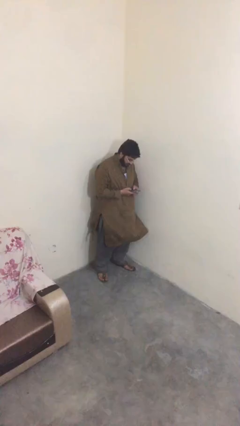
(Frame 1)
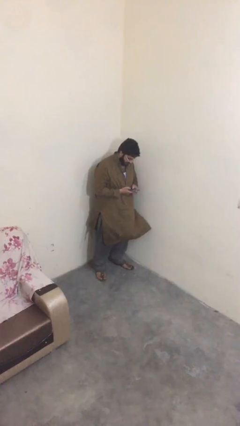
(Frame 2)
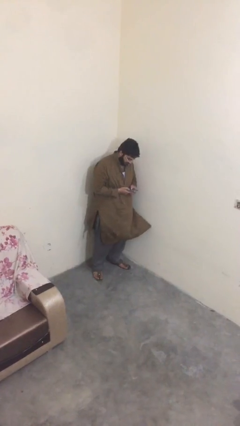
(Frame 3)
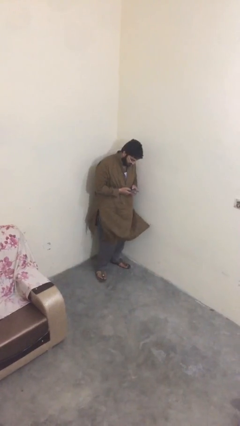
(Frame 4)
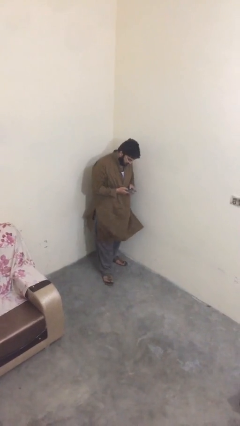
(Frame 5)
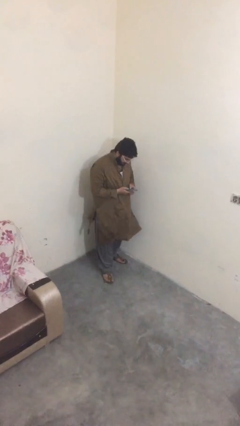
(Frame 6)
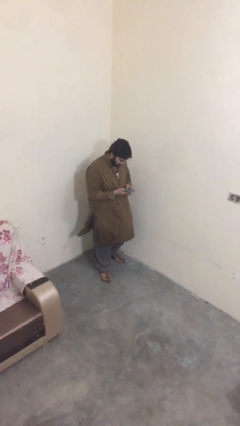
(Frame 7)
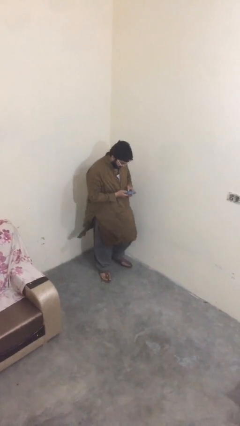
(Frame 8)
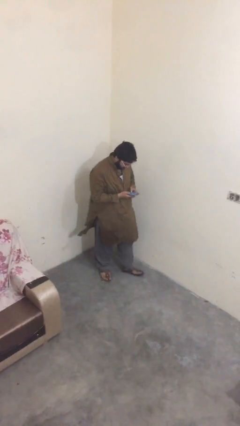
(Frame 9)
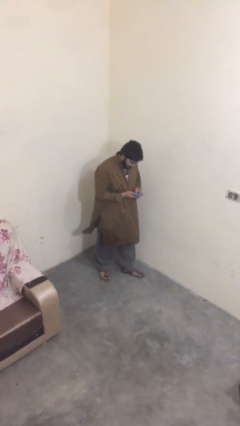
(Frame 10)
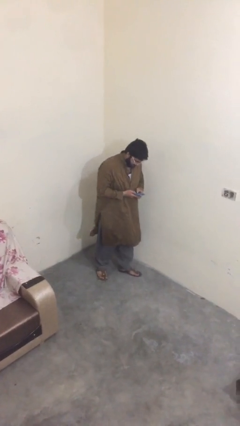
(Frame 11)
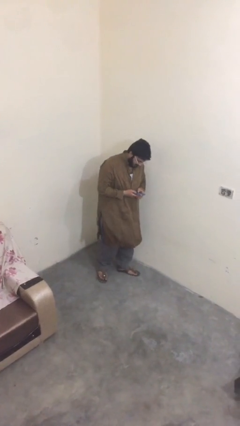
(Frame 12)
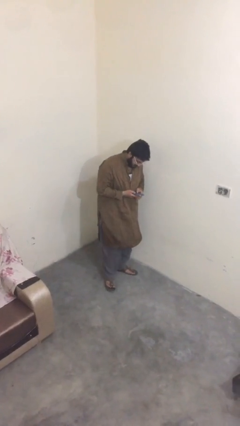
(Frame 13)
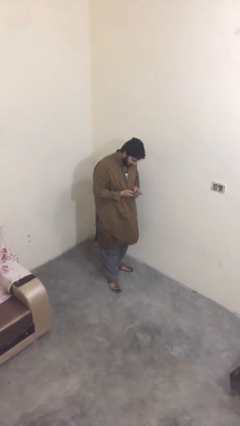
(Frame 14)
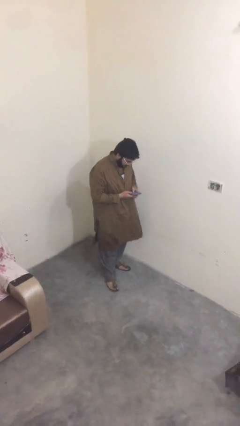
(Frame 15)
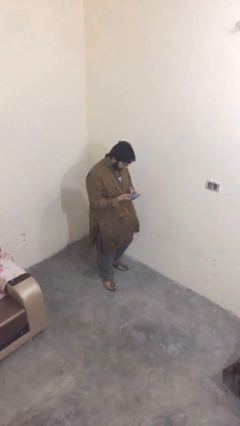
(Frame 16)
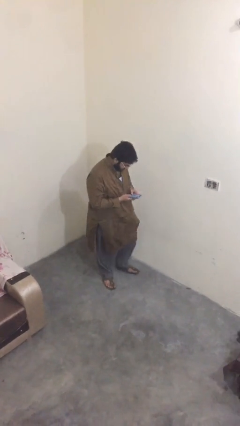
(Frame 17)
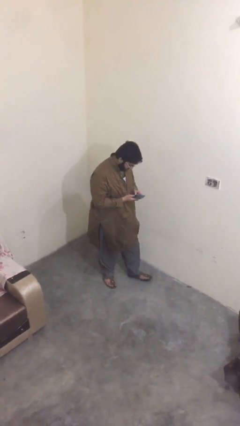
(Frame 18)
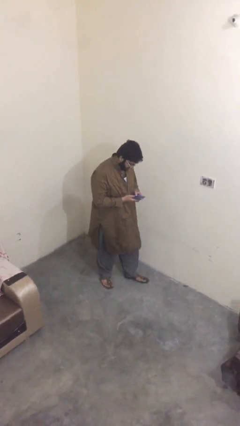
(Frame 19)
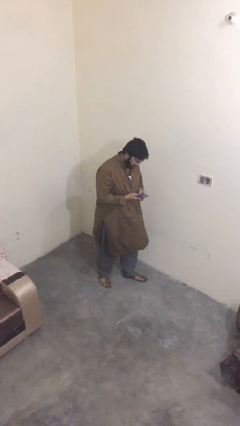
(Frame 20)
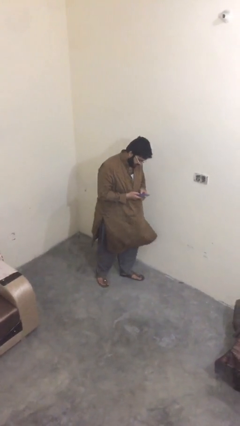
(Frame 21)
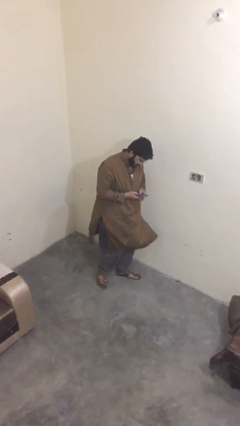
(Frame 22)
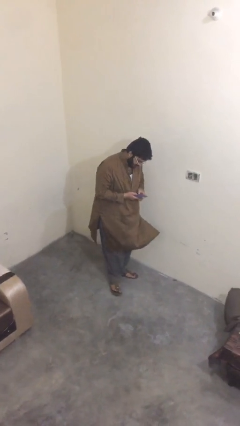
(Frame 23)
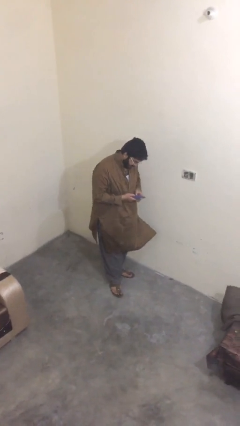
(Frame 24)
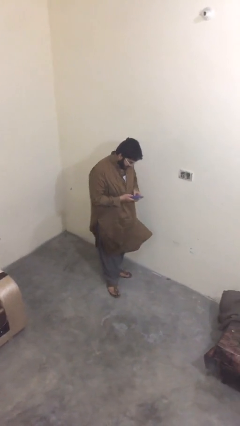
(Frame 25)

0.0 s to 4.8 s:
person texts on phone

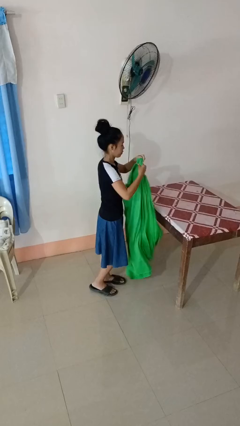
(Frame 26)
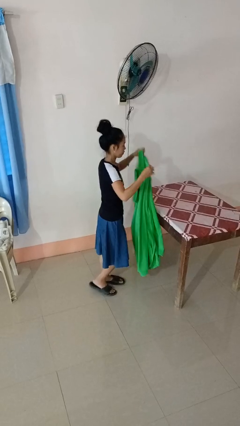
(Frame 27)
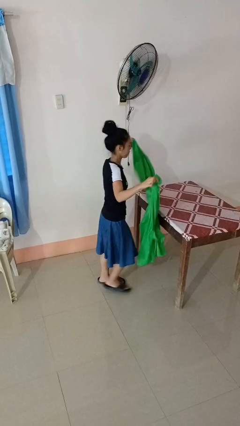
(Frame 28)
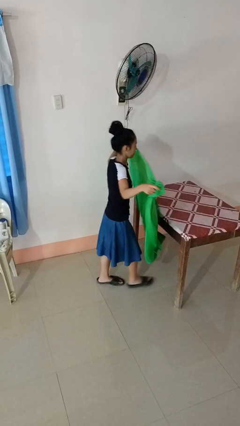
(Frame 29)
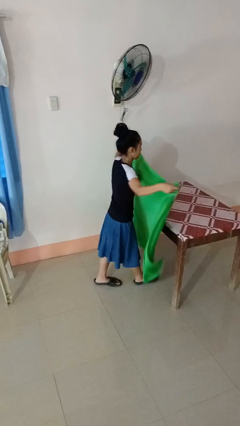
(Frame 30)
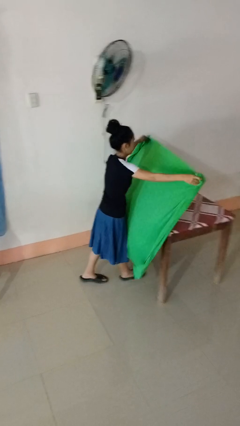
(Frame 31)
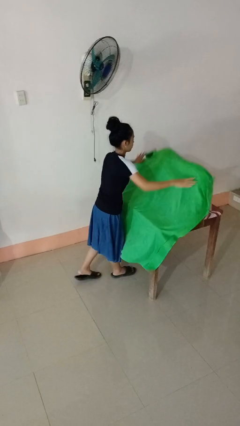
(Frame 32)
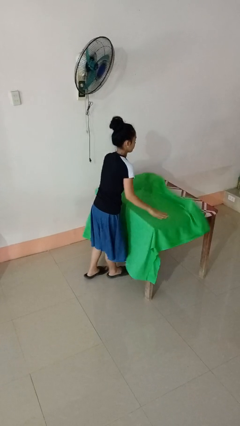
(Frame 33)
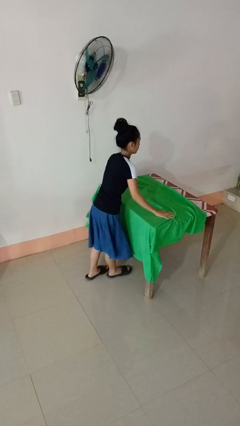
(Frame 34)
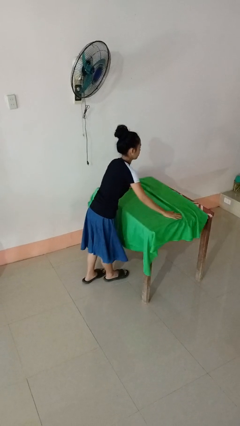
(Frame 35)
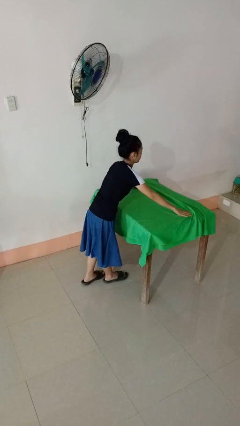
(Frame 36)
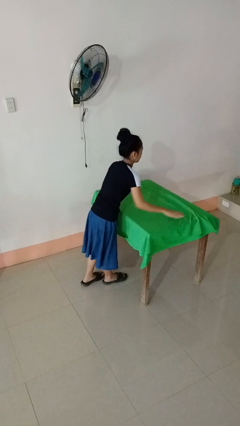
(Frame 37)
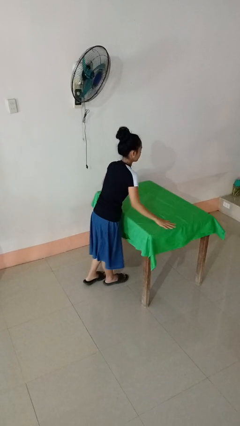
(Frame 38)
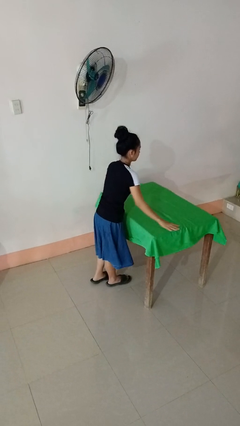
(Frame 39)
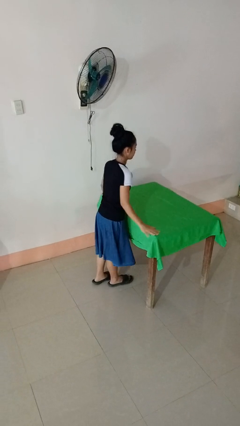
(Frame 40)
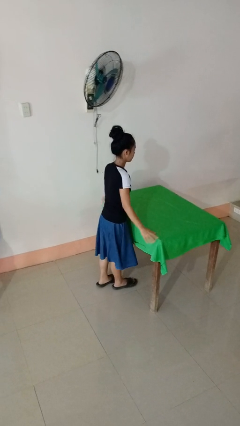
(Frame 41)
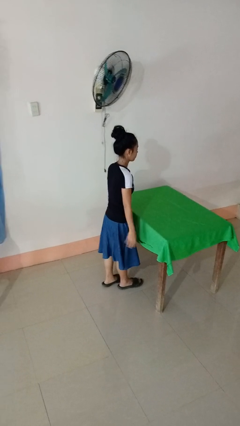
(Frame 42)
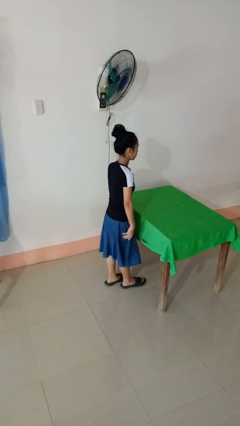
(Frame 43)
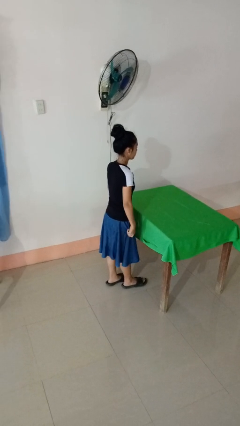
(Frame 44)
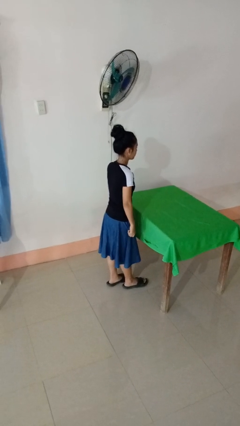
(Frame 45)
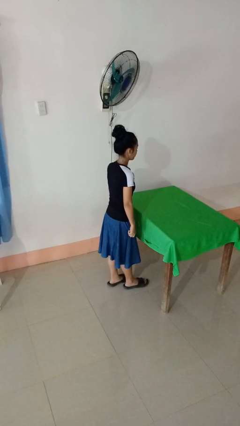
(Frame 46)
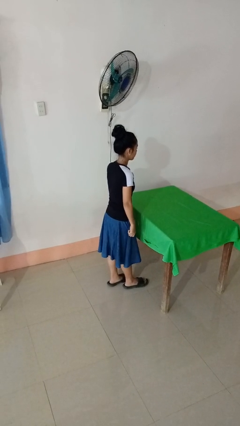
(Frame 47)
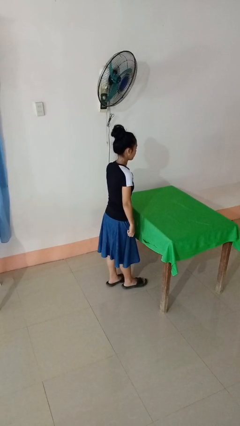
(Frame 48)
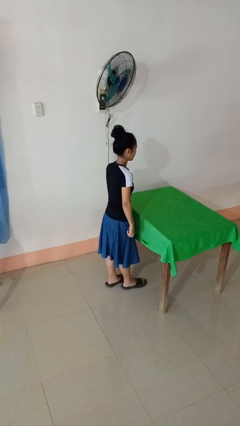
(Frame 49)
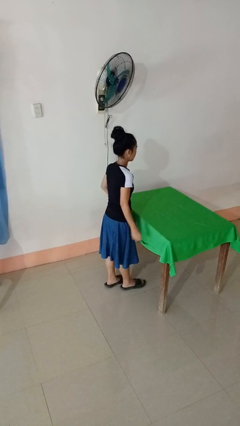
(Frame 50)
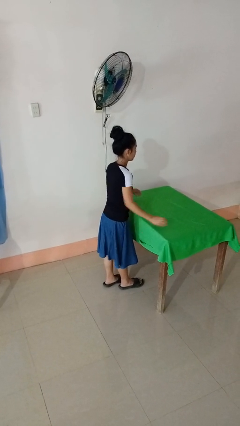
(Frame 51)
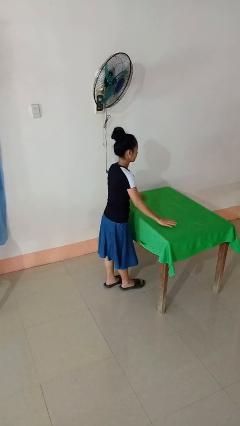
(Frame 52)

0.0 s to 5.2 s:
person spreads tablecloth

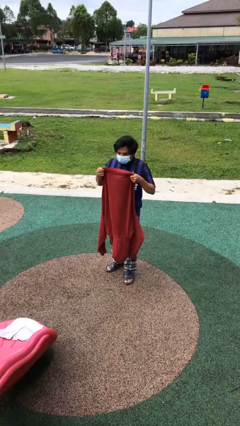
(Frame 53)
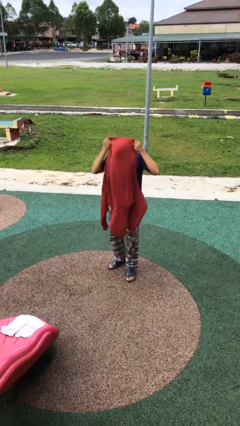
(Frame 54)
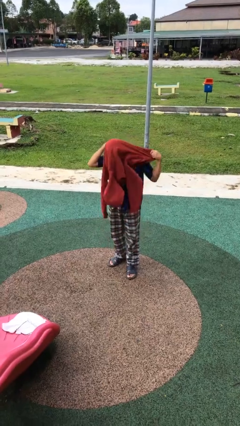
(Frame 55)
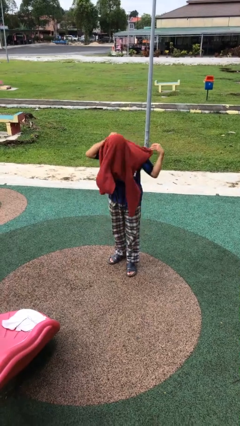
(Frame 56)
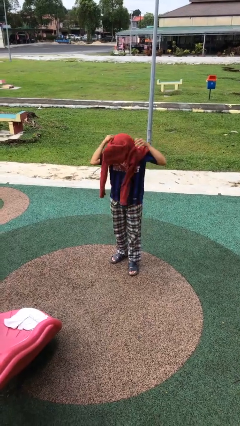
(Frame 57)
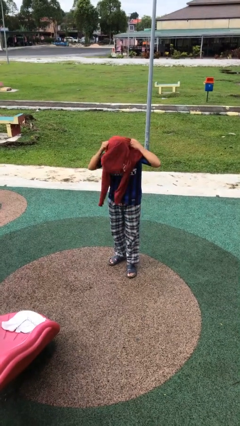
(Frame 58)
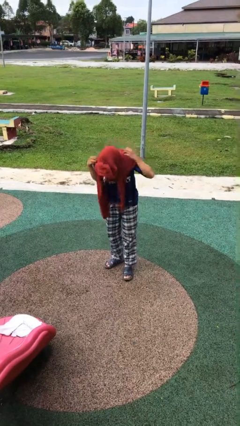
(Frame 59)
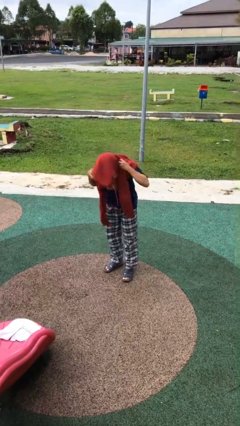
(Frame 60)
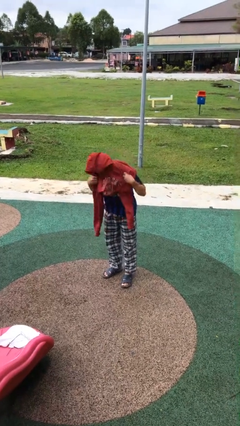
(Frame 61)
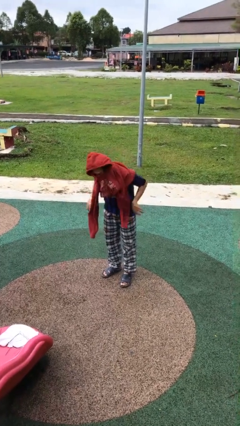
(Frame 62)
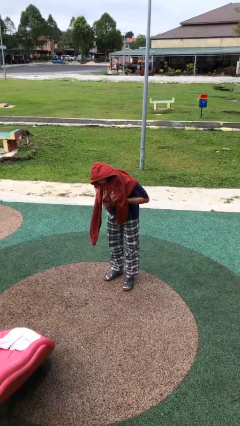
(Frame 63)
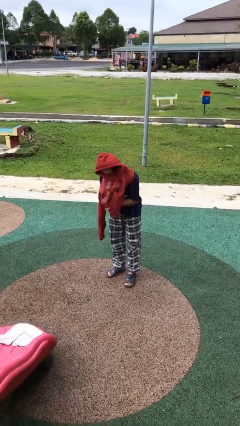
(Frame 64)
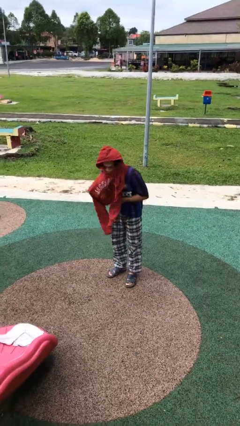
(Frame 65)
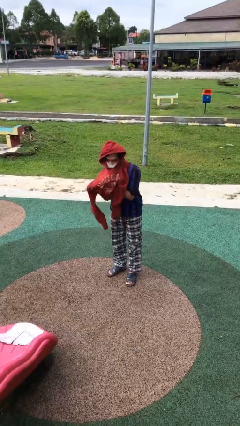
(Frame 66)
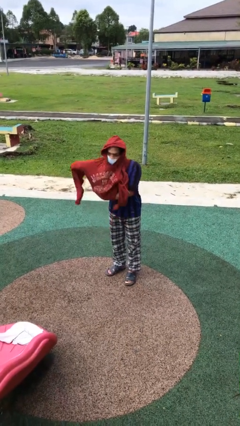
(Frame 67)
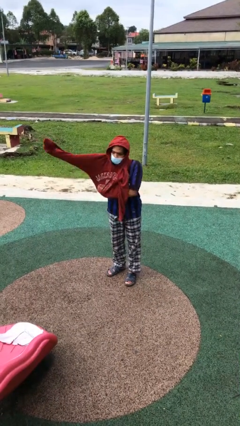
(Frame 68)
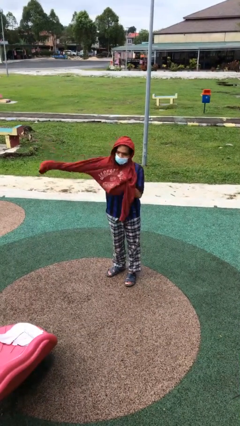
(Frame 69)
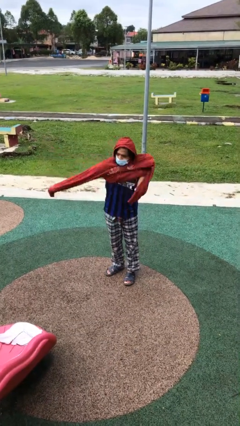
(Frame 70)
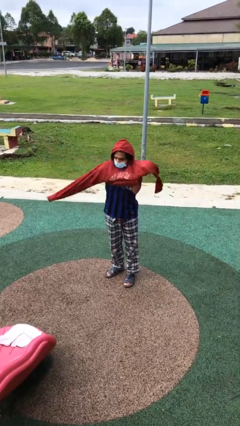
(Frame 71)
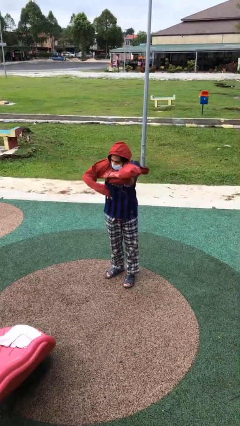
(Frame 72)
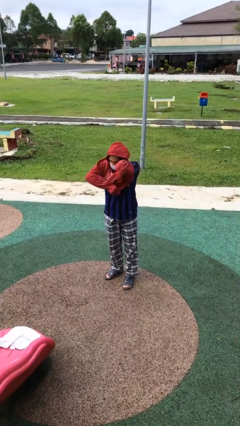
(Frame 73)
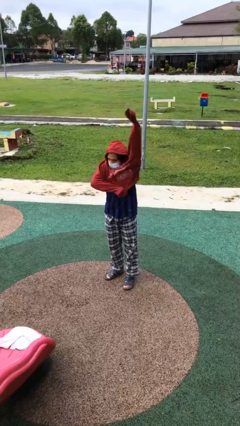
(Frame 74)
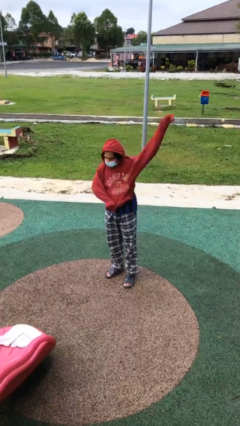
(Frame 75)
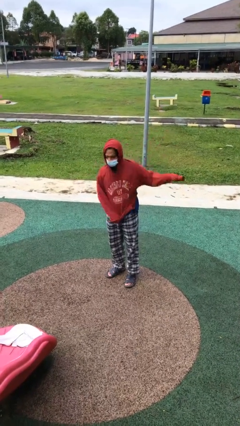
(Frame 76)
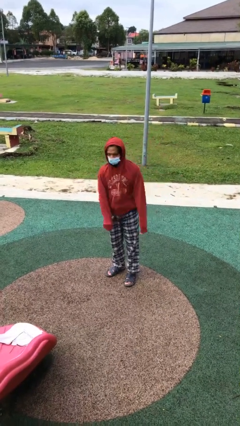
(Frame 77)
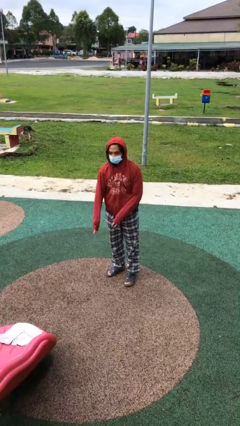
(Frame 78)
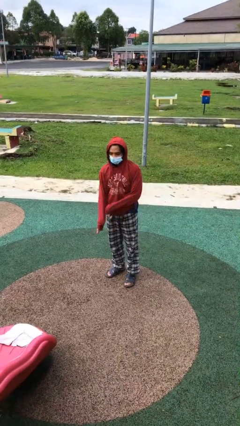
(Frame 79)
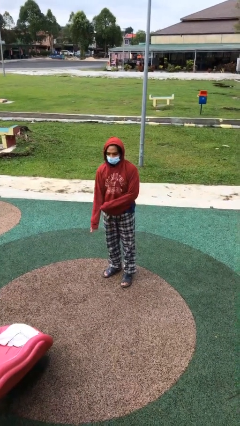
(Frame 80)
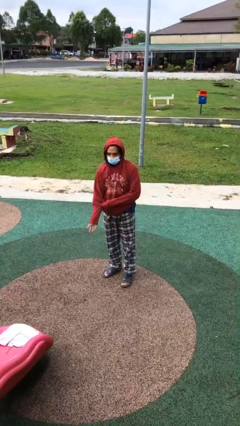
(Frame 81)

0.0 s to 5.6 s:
person puts on hoodie

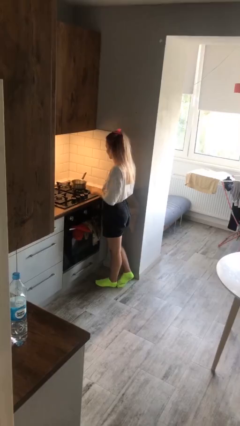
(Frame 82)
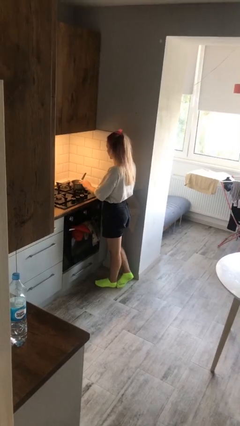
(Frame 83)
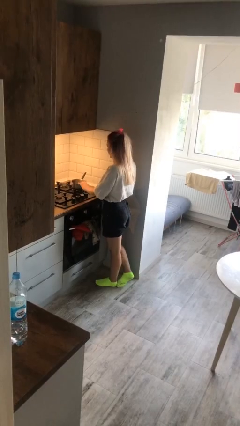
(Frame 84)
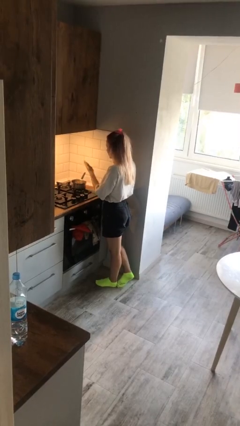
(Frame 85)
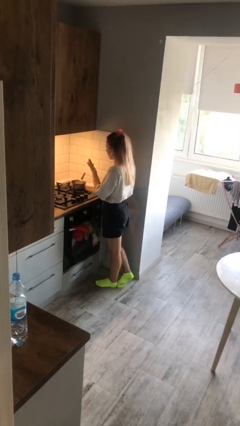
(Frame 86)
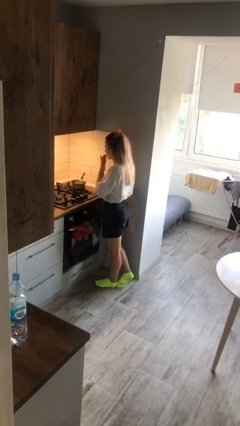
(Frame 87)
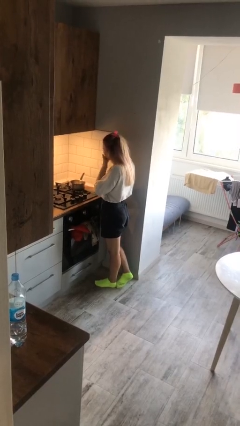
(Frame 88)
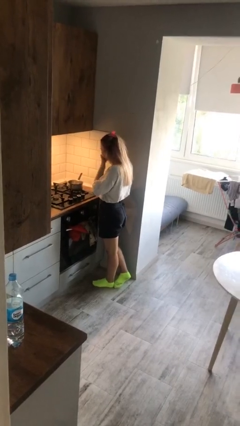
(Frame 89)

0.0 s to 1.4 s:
person burns hand

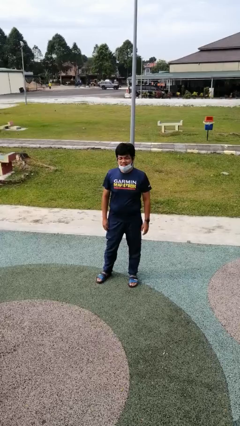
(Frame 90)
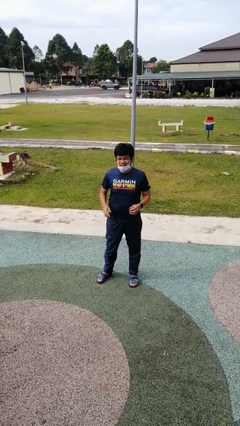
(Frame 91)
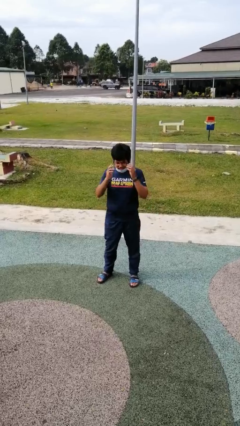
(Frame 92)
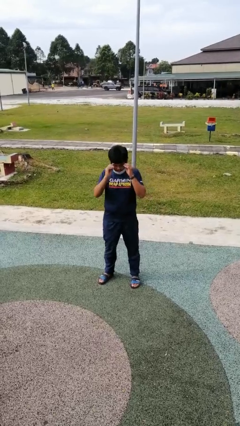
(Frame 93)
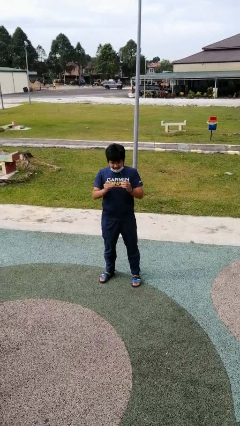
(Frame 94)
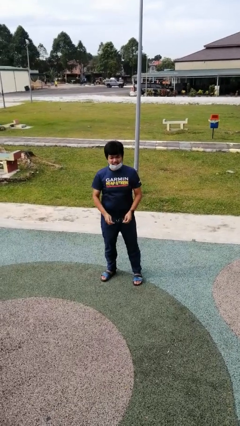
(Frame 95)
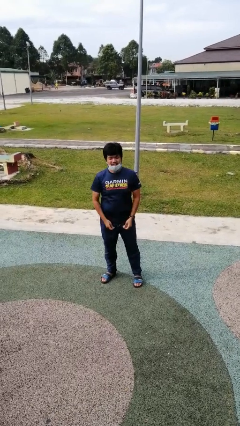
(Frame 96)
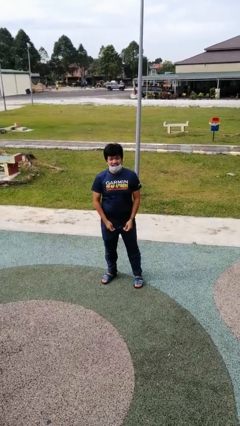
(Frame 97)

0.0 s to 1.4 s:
person takes off glasses
